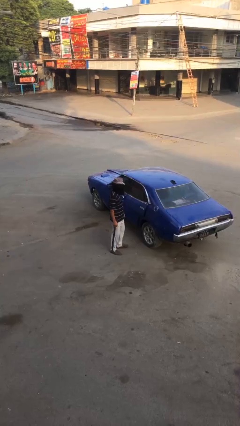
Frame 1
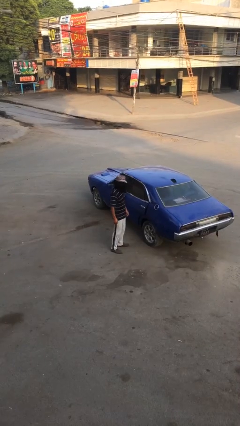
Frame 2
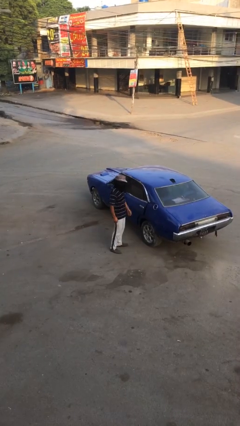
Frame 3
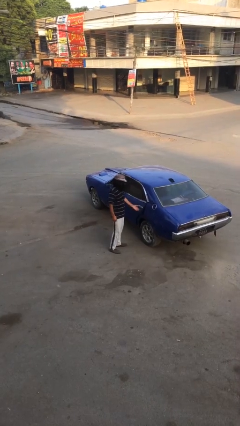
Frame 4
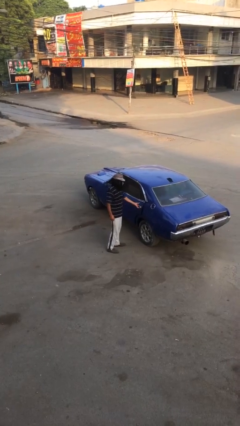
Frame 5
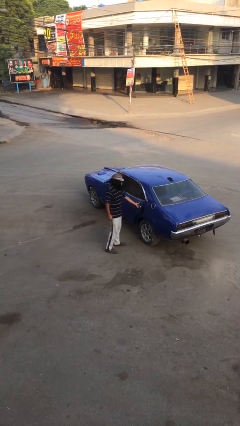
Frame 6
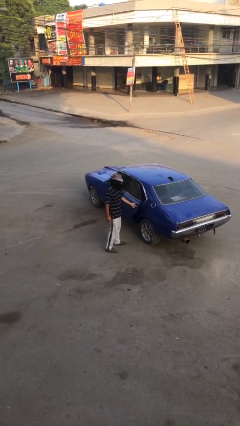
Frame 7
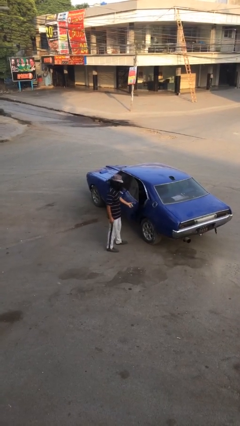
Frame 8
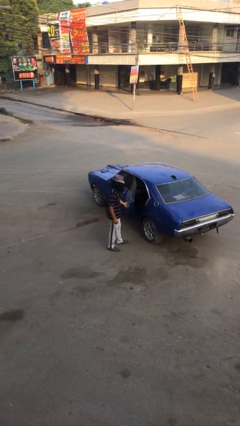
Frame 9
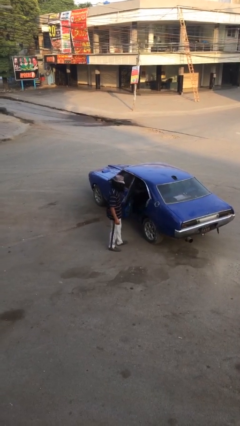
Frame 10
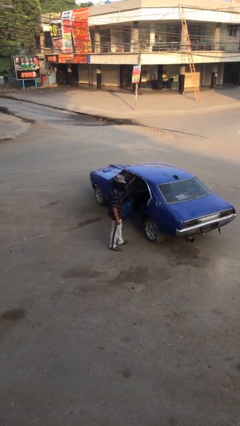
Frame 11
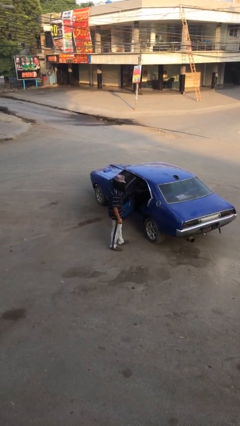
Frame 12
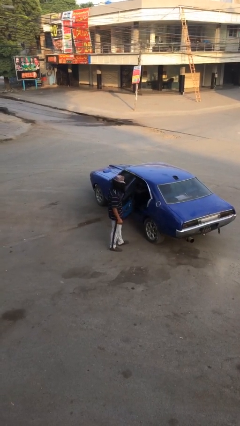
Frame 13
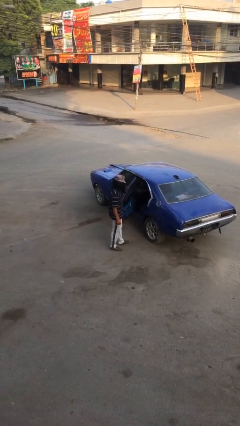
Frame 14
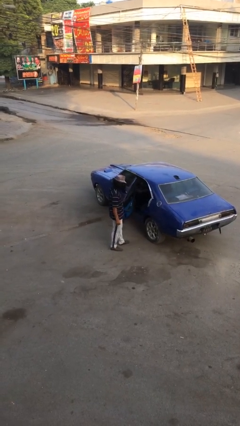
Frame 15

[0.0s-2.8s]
person opens car door

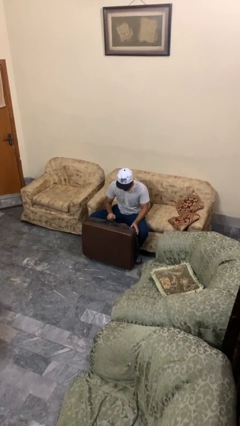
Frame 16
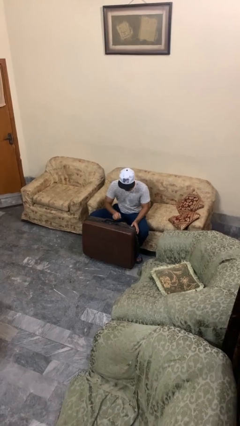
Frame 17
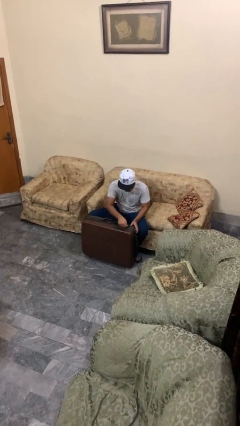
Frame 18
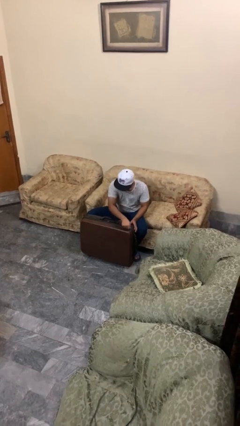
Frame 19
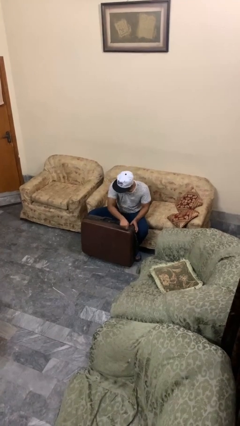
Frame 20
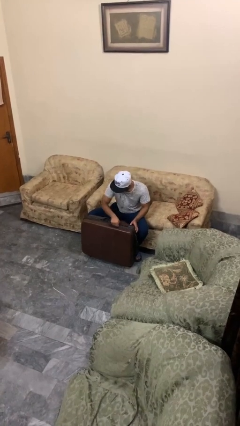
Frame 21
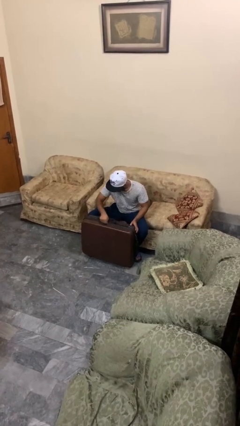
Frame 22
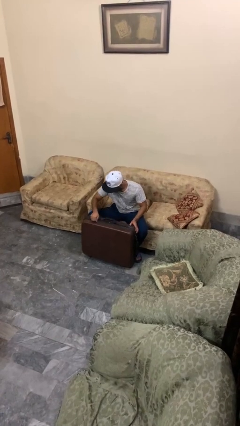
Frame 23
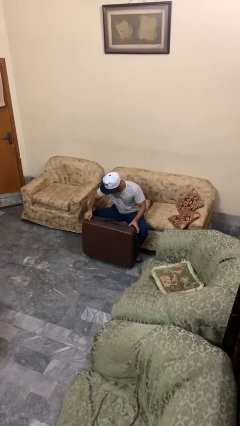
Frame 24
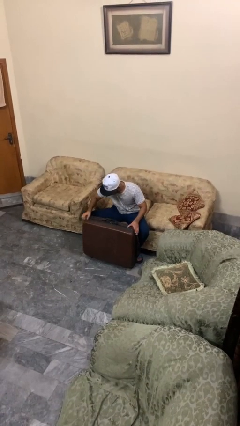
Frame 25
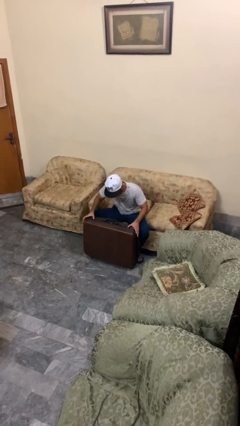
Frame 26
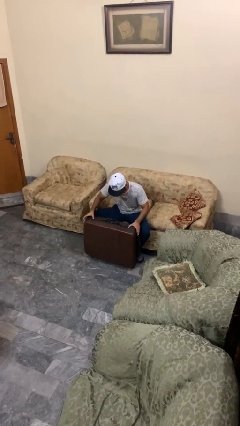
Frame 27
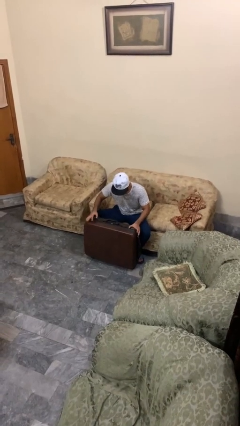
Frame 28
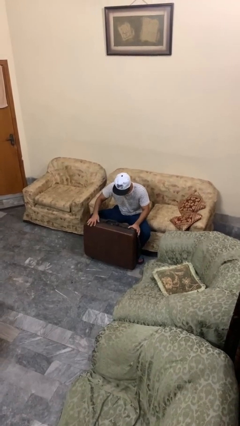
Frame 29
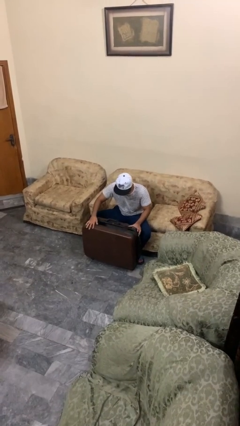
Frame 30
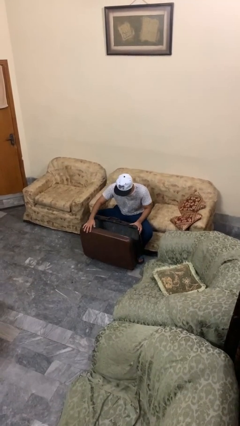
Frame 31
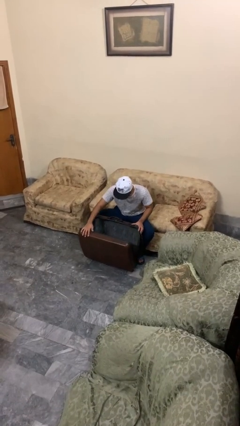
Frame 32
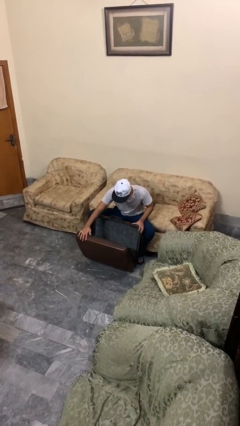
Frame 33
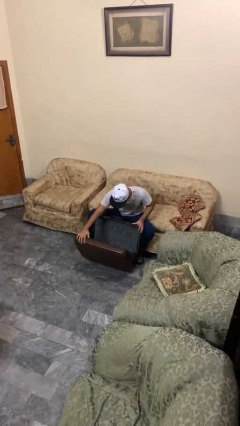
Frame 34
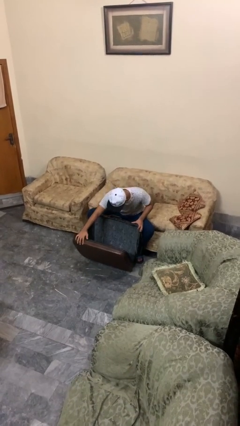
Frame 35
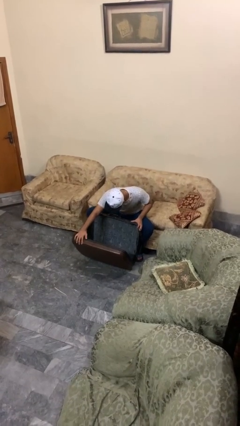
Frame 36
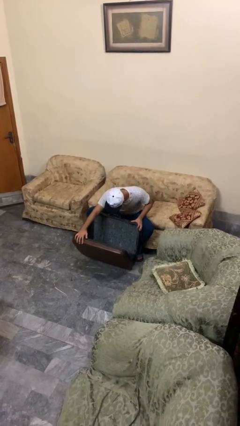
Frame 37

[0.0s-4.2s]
person opens suitcase

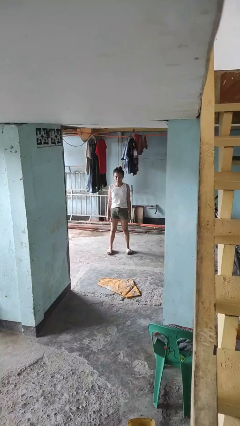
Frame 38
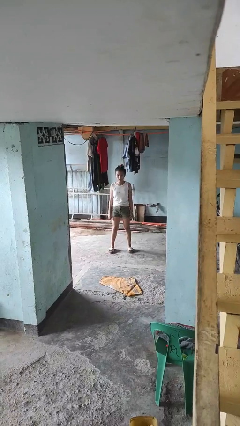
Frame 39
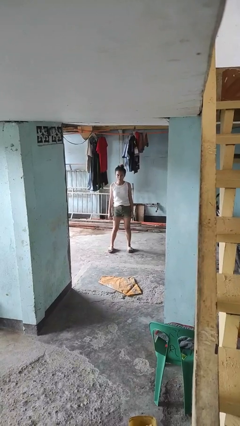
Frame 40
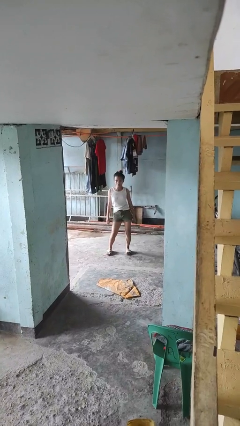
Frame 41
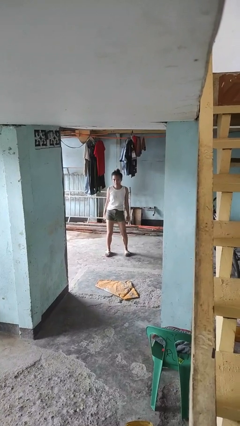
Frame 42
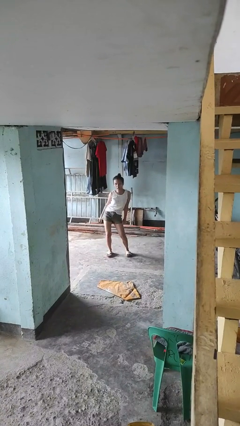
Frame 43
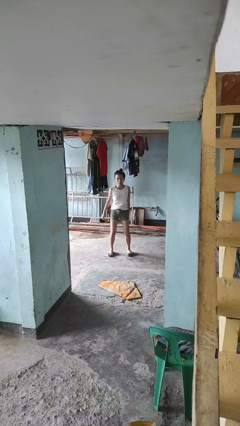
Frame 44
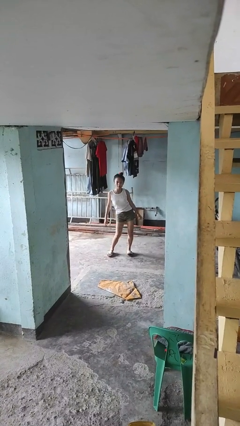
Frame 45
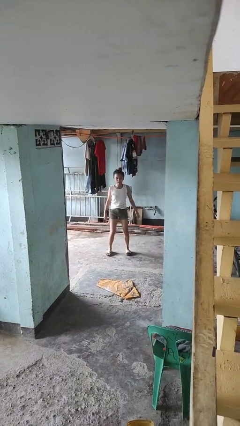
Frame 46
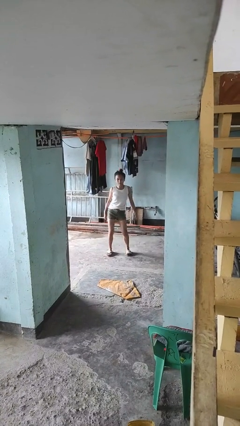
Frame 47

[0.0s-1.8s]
person wiggles hips

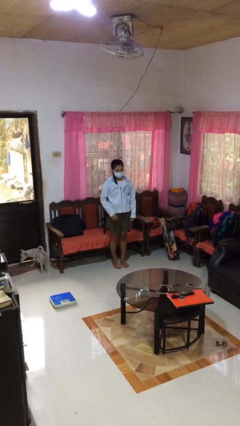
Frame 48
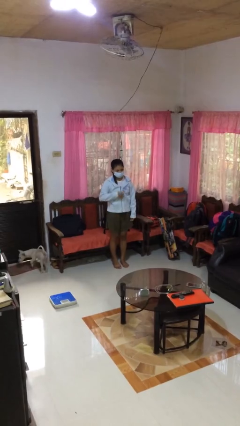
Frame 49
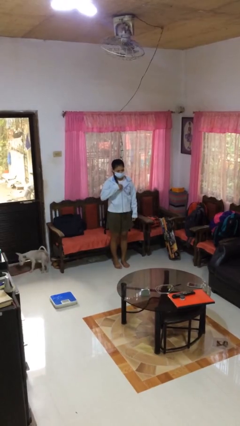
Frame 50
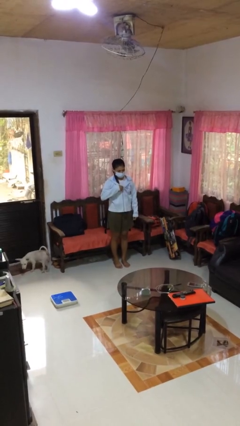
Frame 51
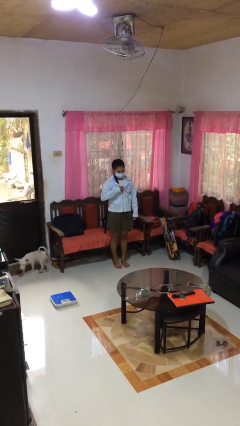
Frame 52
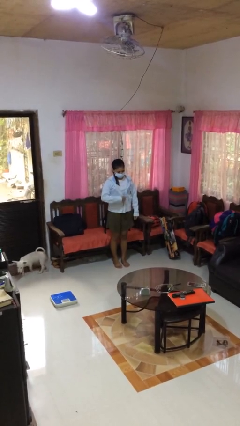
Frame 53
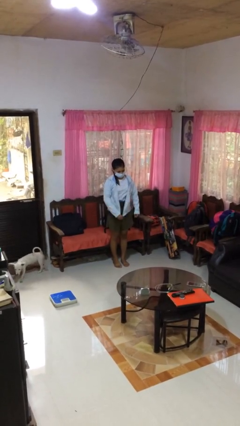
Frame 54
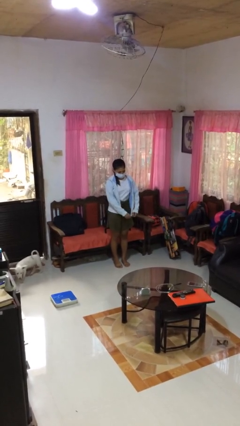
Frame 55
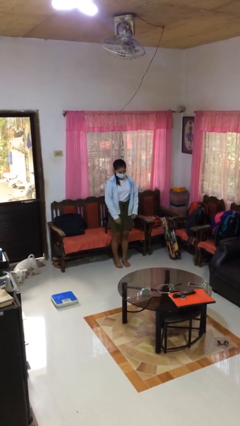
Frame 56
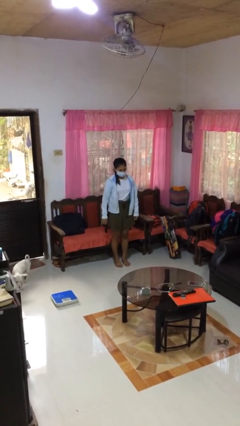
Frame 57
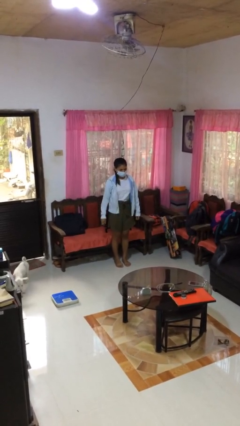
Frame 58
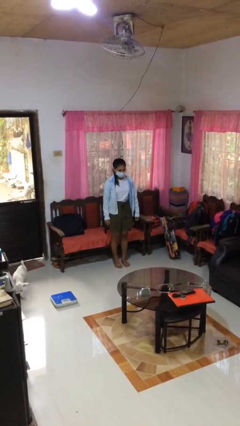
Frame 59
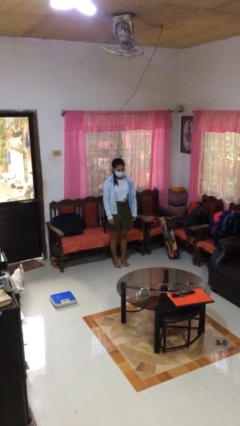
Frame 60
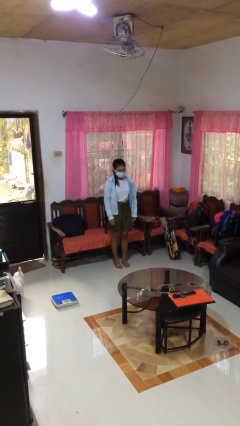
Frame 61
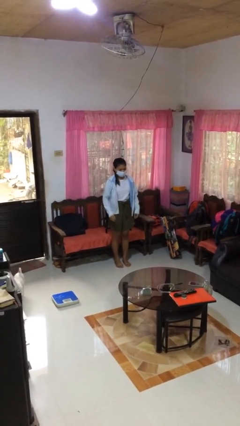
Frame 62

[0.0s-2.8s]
person unzips jacket

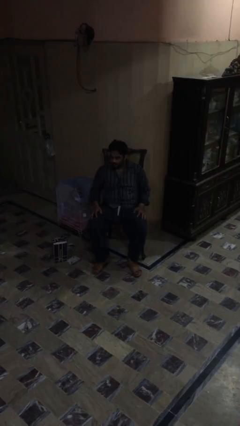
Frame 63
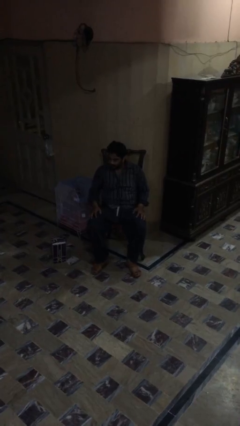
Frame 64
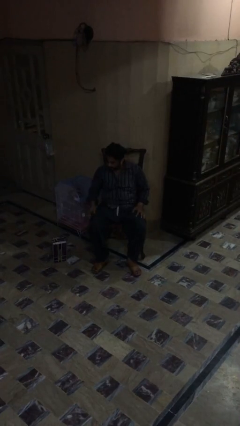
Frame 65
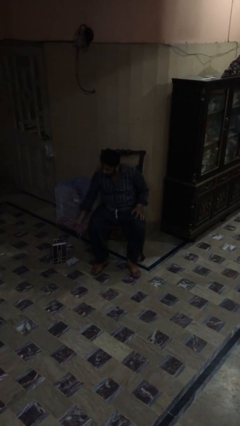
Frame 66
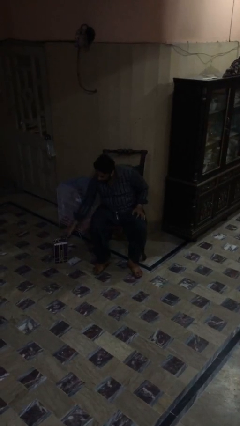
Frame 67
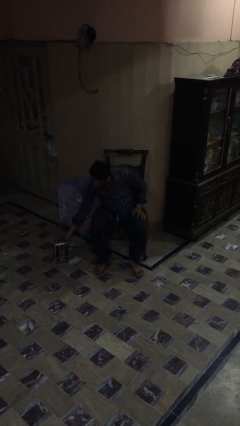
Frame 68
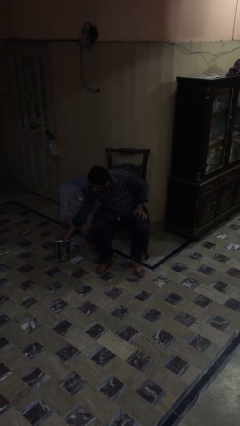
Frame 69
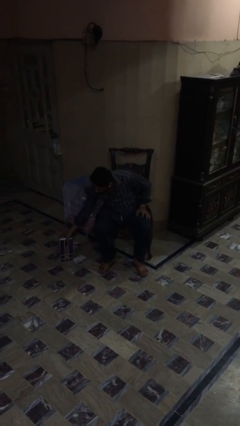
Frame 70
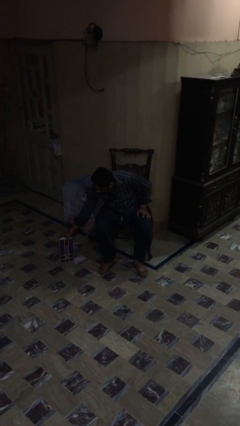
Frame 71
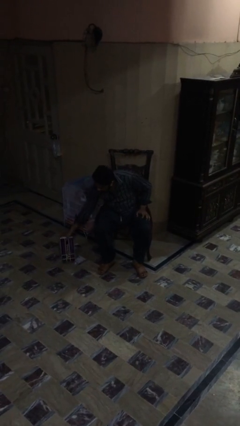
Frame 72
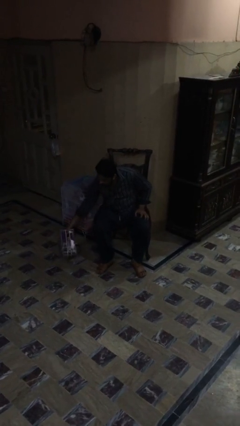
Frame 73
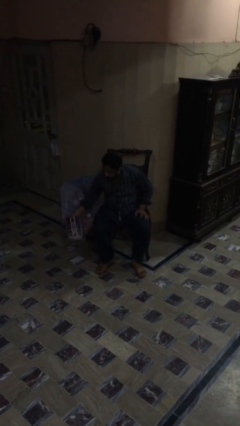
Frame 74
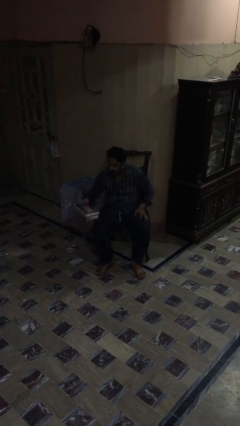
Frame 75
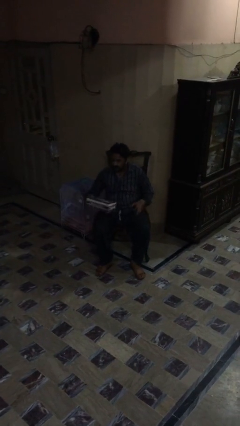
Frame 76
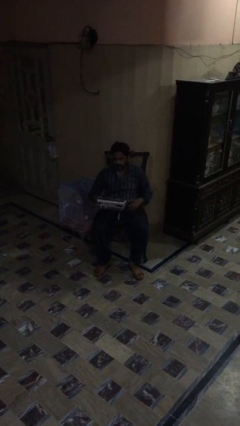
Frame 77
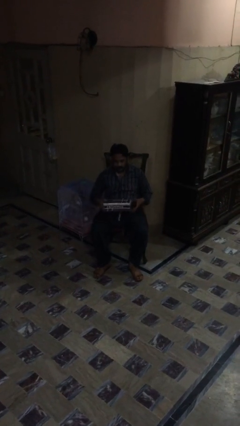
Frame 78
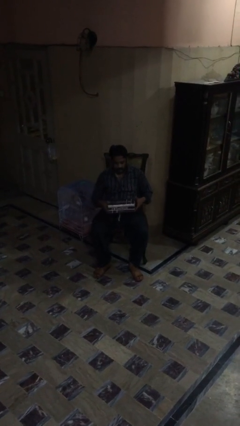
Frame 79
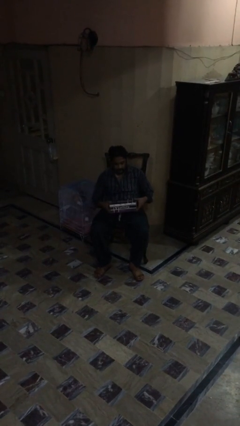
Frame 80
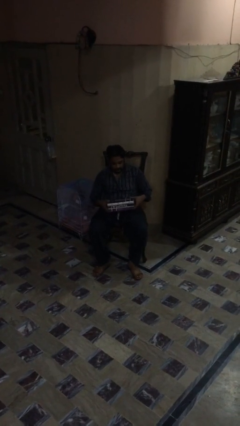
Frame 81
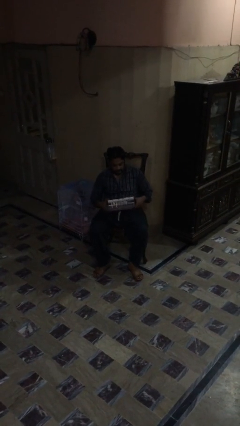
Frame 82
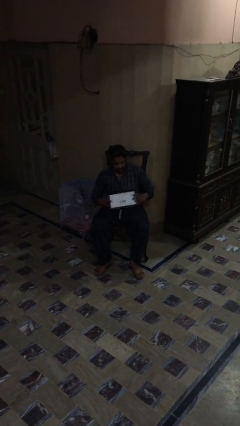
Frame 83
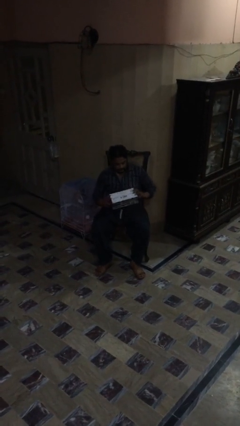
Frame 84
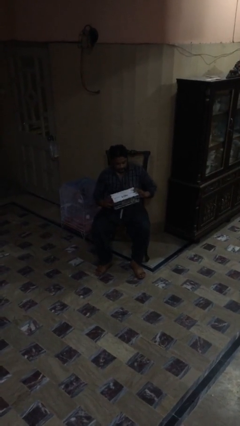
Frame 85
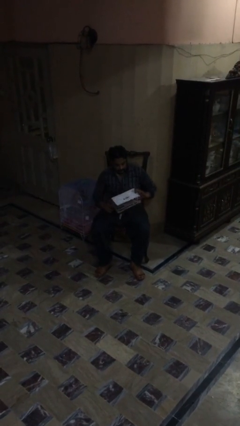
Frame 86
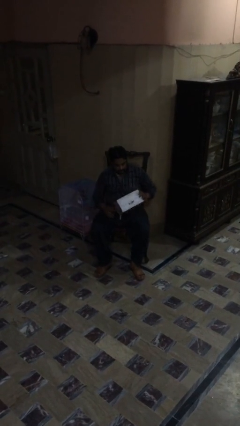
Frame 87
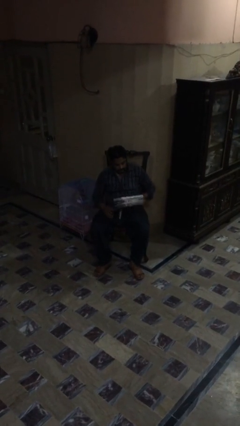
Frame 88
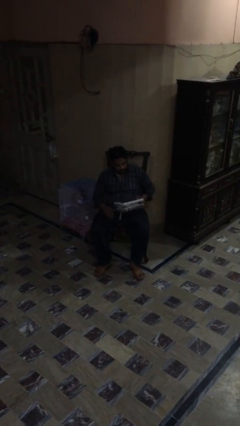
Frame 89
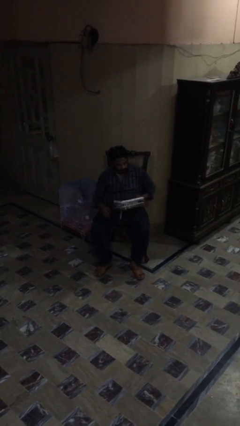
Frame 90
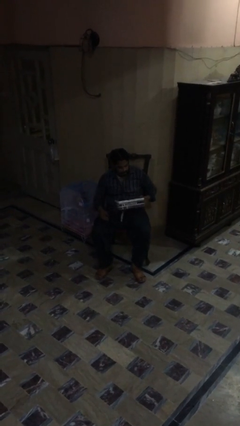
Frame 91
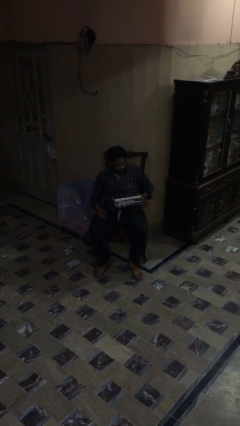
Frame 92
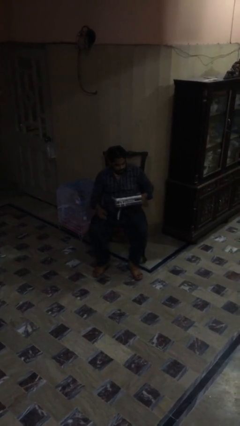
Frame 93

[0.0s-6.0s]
person picks up object from floor

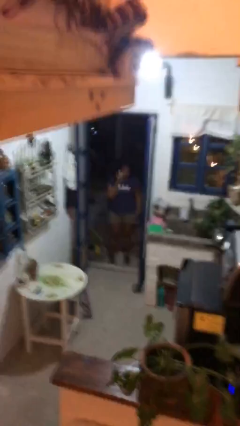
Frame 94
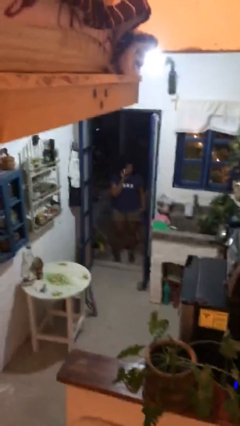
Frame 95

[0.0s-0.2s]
person enters scene through structure
